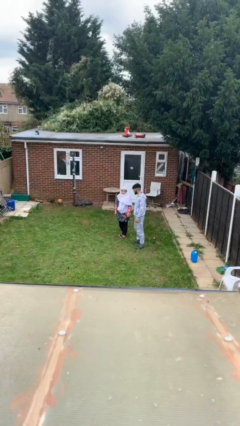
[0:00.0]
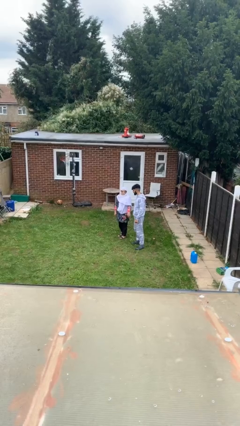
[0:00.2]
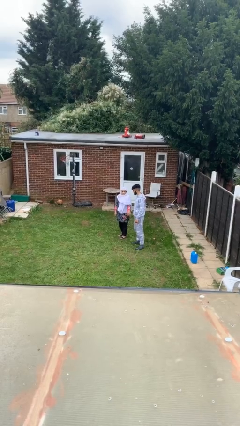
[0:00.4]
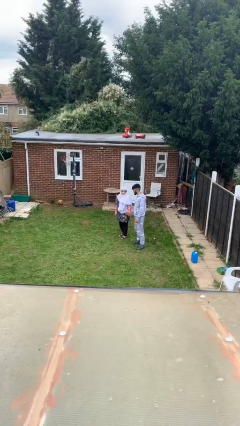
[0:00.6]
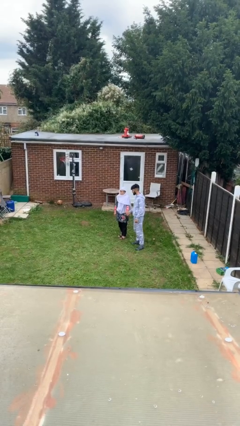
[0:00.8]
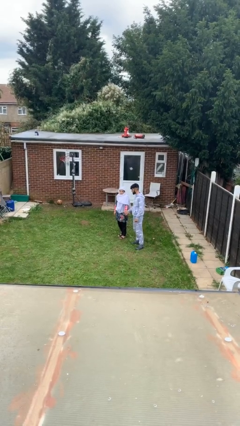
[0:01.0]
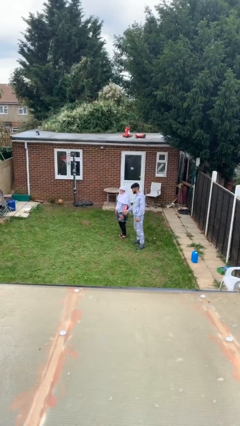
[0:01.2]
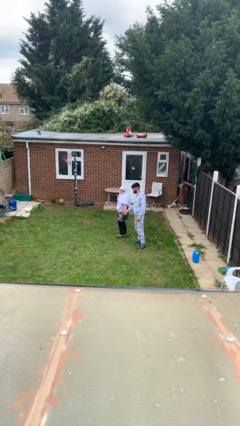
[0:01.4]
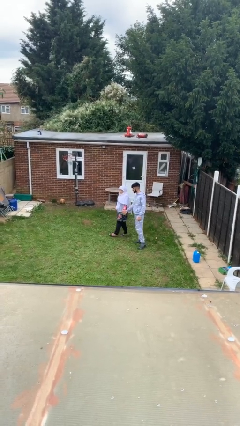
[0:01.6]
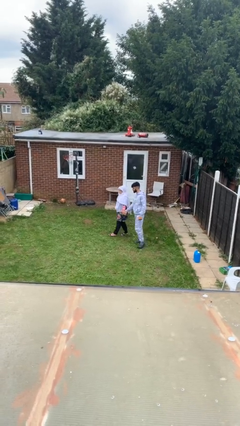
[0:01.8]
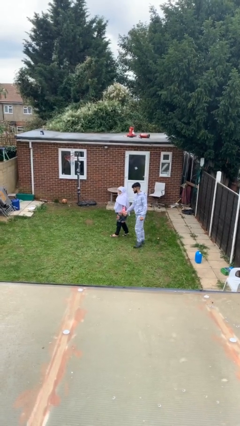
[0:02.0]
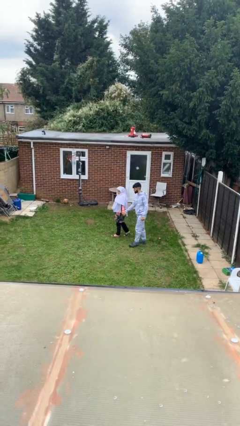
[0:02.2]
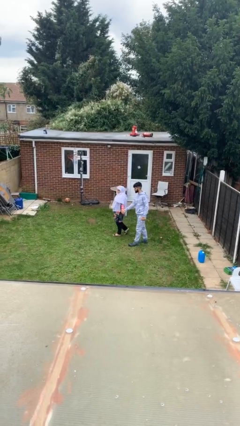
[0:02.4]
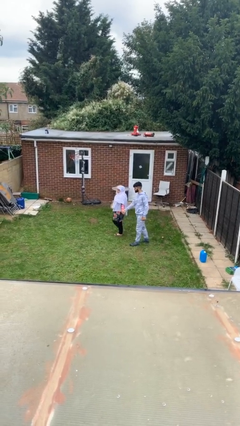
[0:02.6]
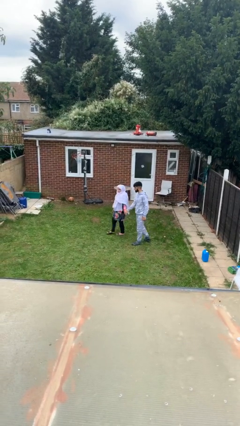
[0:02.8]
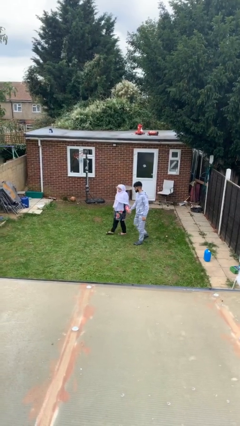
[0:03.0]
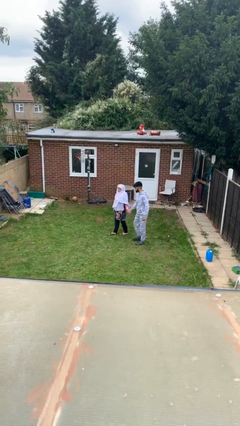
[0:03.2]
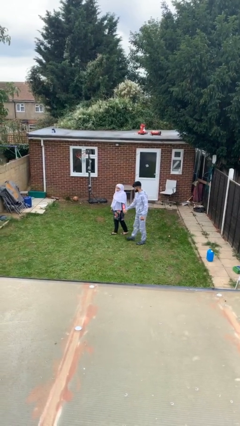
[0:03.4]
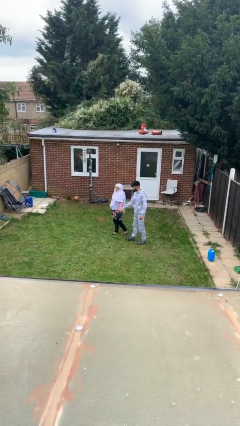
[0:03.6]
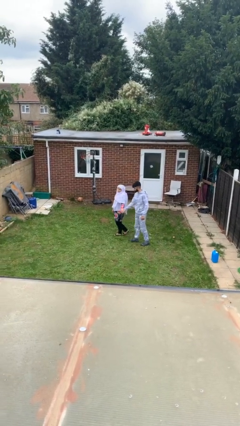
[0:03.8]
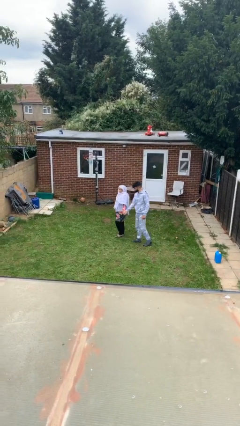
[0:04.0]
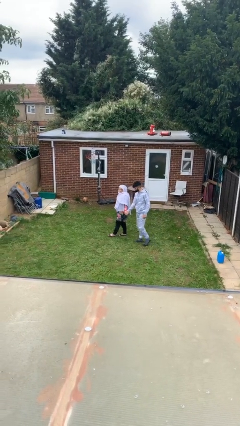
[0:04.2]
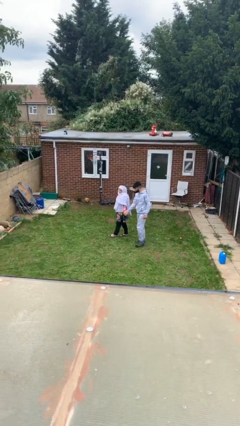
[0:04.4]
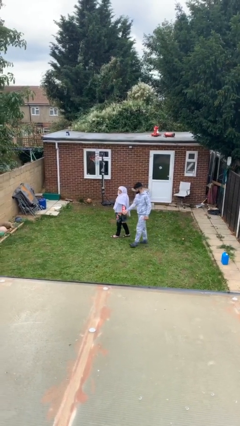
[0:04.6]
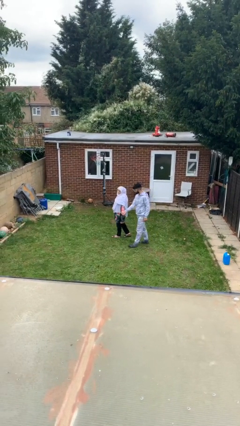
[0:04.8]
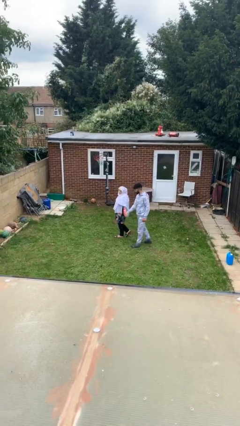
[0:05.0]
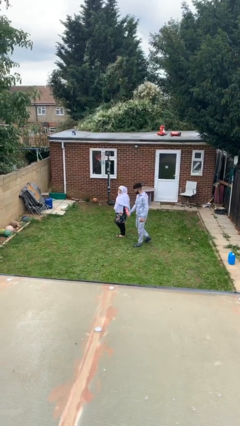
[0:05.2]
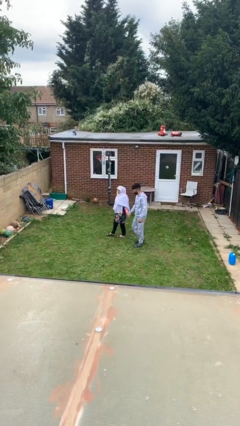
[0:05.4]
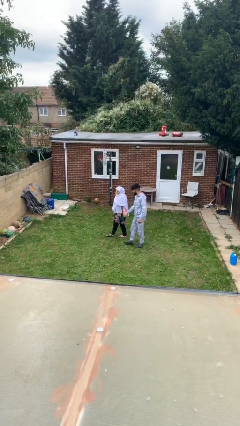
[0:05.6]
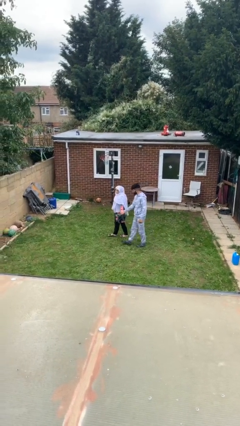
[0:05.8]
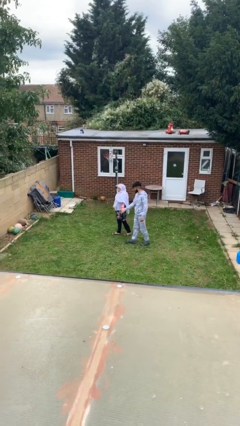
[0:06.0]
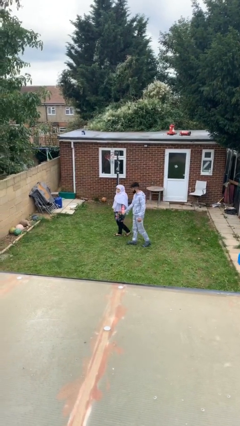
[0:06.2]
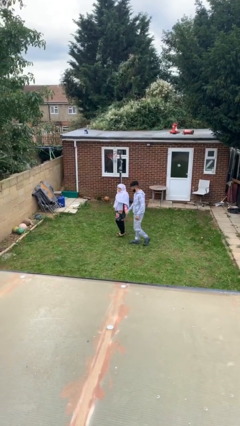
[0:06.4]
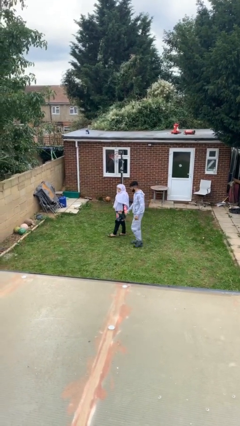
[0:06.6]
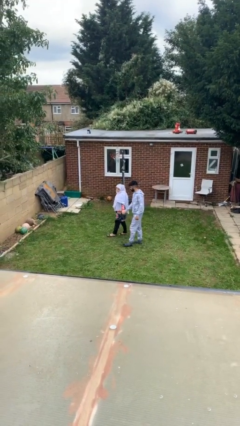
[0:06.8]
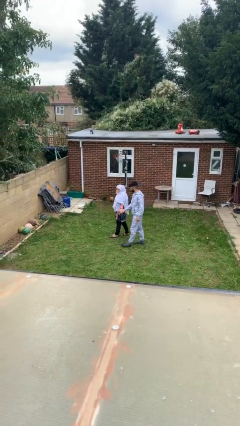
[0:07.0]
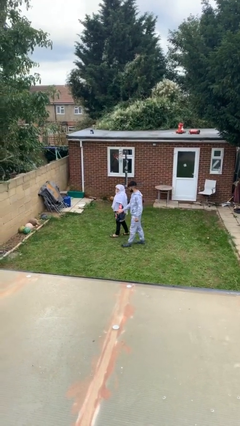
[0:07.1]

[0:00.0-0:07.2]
person holds hand

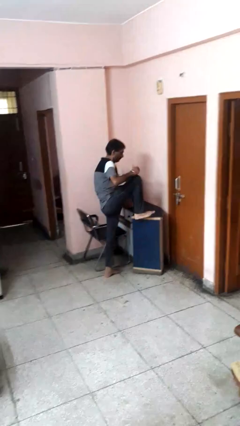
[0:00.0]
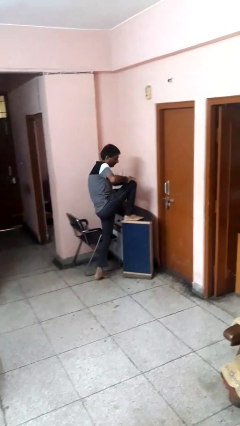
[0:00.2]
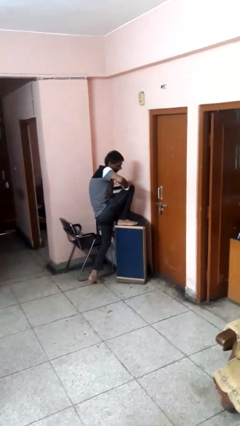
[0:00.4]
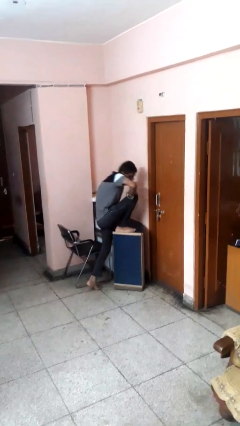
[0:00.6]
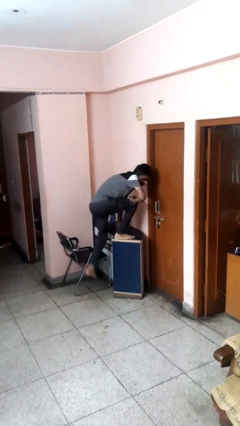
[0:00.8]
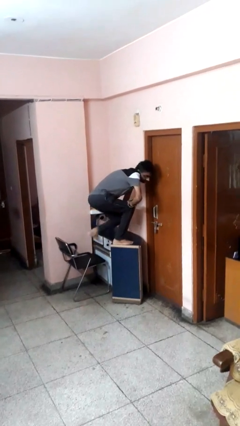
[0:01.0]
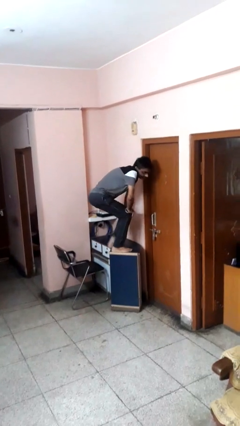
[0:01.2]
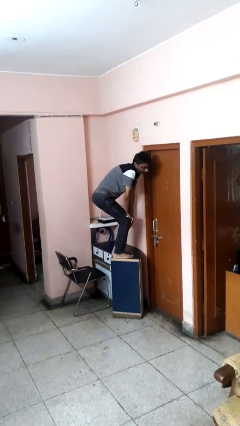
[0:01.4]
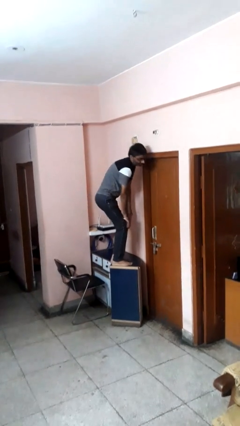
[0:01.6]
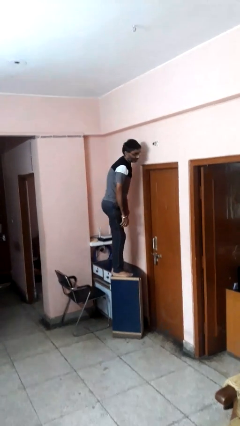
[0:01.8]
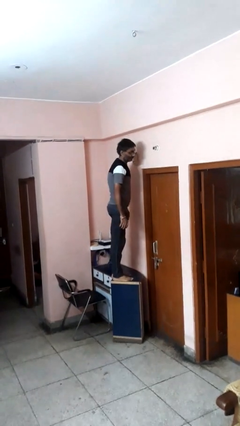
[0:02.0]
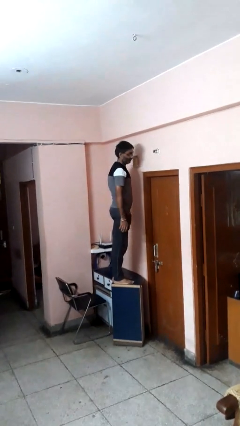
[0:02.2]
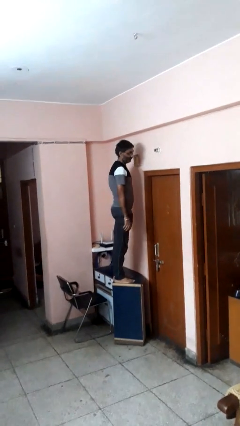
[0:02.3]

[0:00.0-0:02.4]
person climbs on table

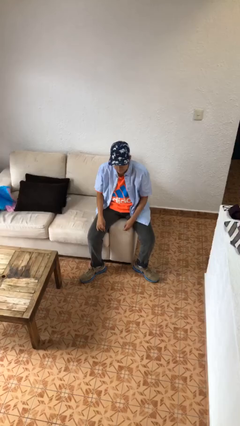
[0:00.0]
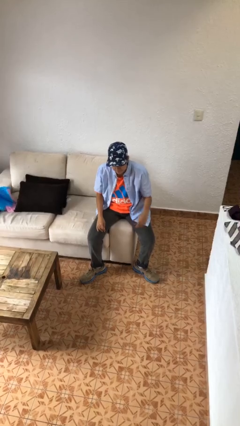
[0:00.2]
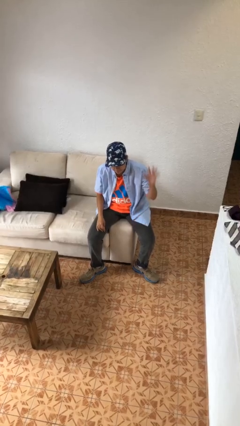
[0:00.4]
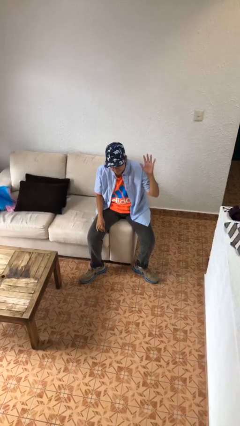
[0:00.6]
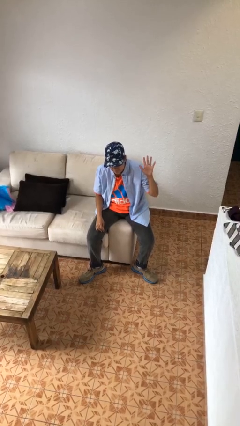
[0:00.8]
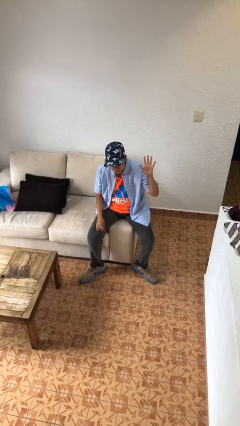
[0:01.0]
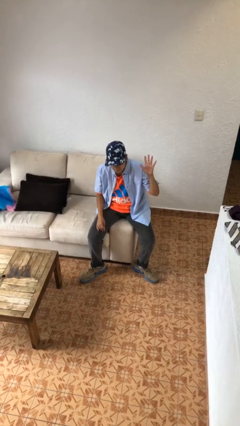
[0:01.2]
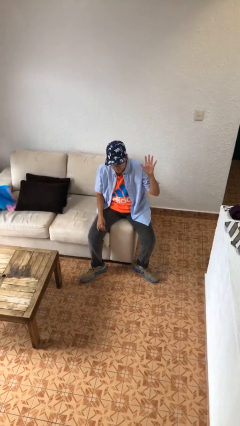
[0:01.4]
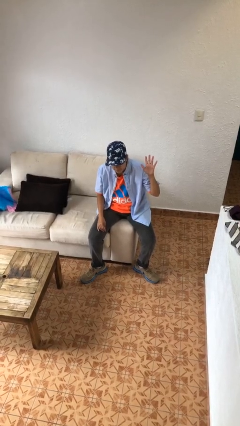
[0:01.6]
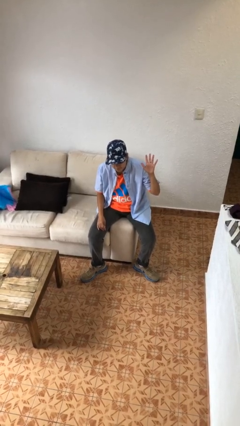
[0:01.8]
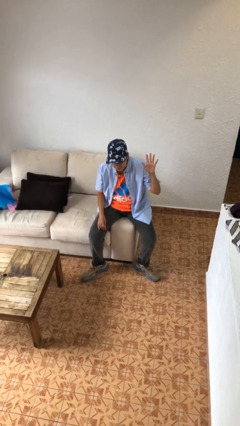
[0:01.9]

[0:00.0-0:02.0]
person gestures number five

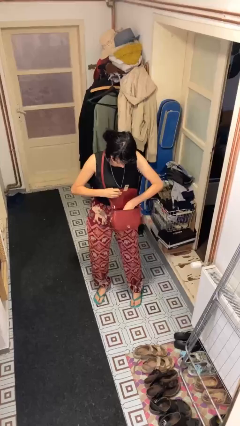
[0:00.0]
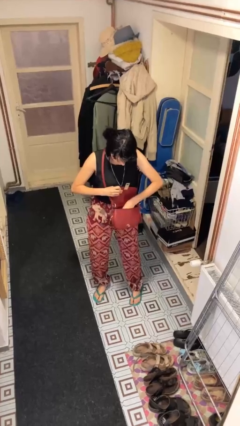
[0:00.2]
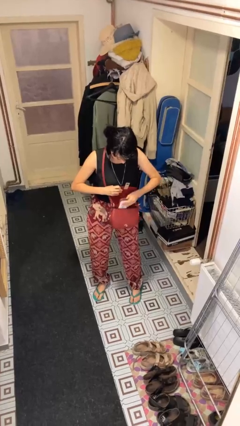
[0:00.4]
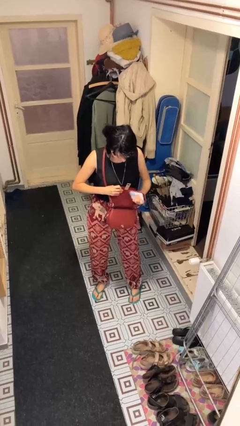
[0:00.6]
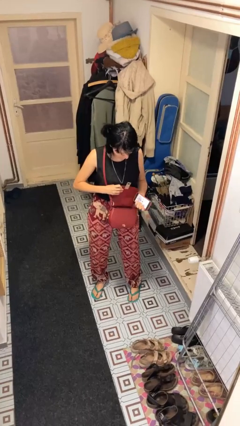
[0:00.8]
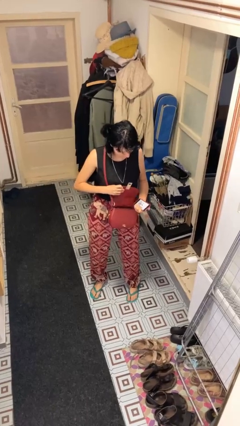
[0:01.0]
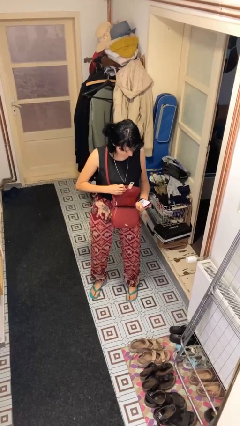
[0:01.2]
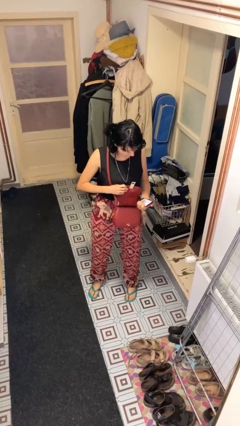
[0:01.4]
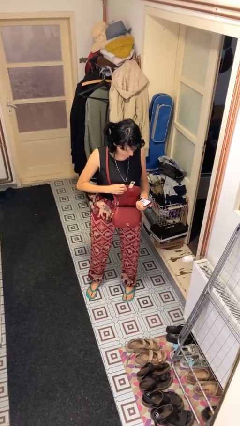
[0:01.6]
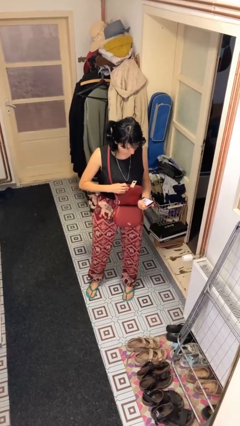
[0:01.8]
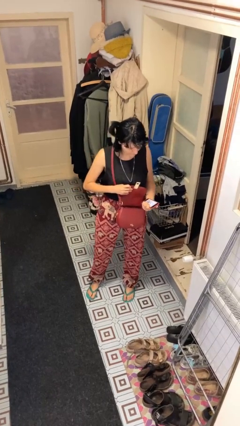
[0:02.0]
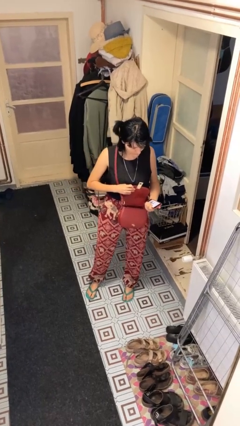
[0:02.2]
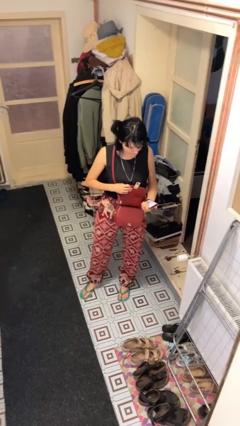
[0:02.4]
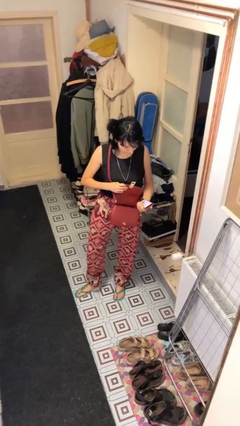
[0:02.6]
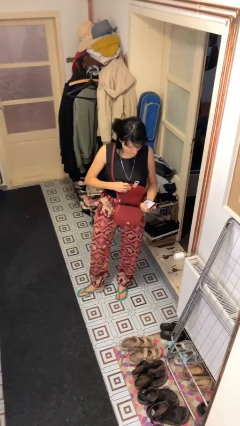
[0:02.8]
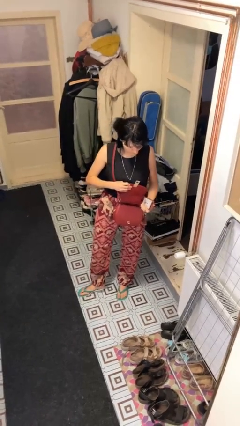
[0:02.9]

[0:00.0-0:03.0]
person takes object from purse

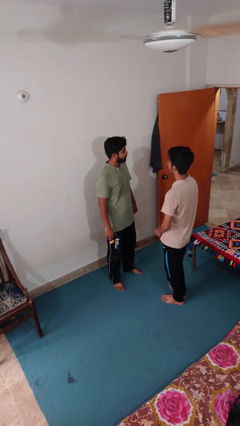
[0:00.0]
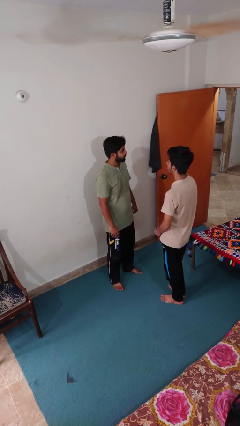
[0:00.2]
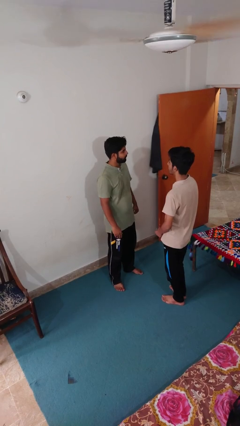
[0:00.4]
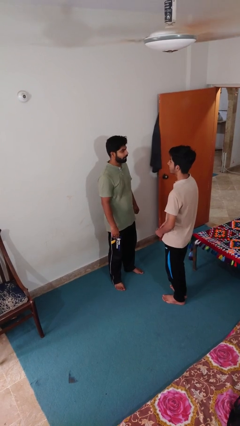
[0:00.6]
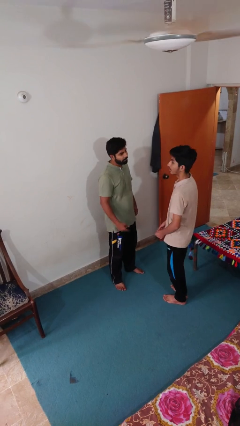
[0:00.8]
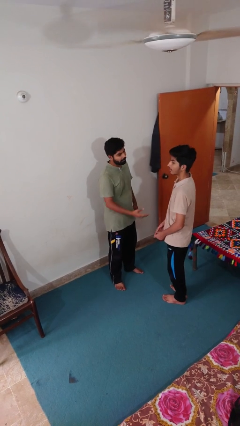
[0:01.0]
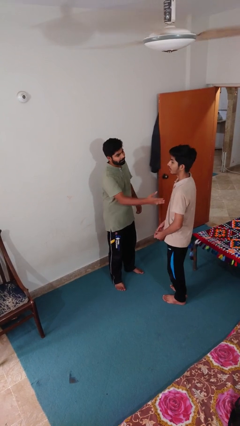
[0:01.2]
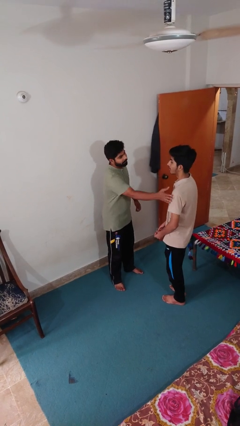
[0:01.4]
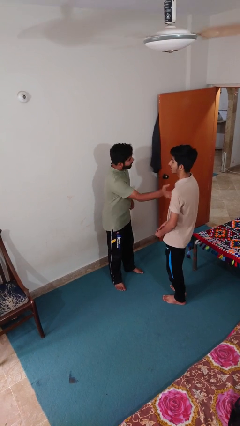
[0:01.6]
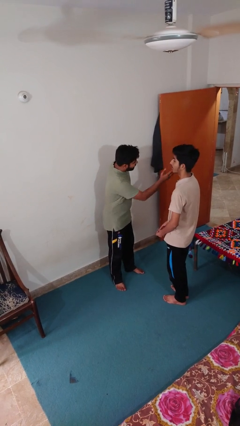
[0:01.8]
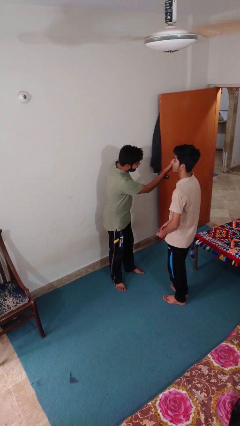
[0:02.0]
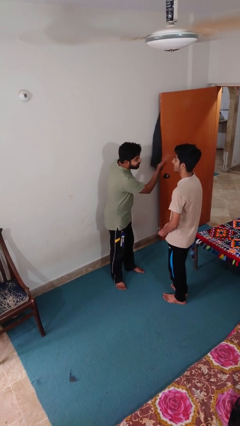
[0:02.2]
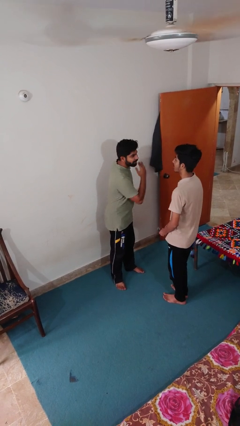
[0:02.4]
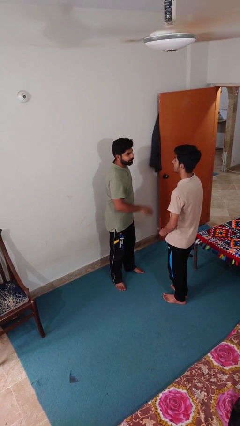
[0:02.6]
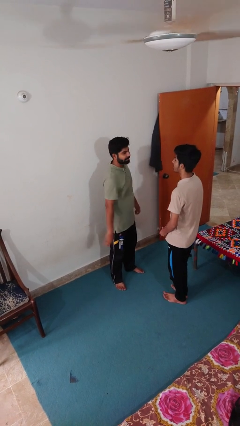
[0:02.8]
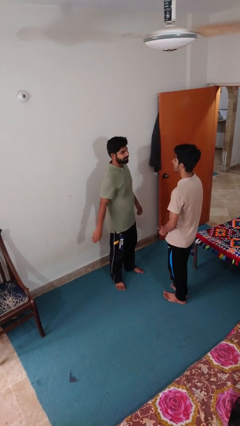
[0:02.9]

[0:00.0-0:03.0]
person shoves person
